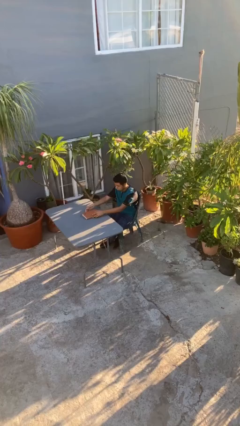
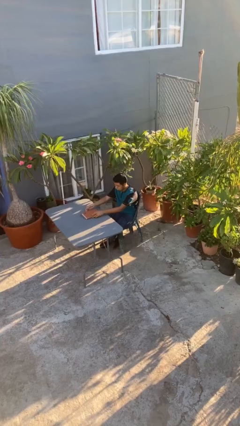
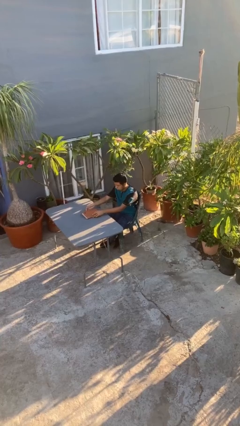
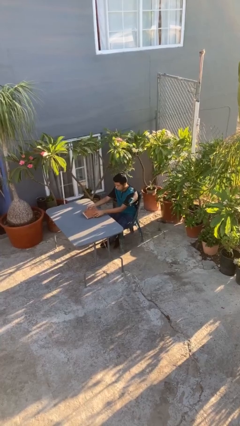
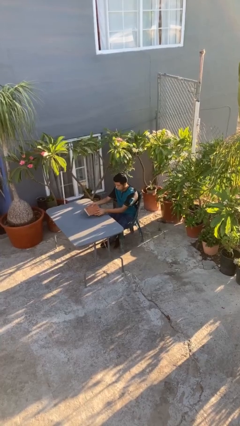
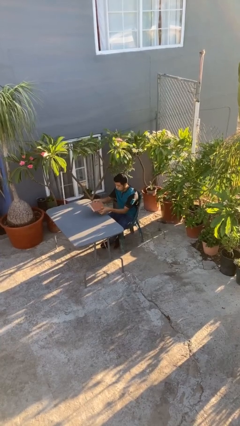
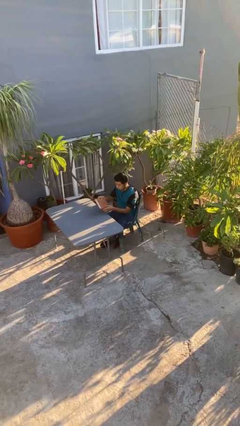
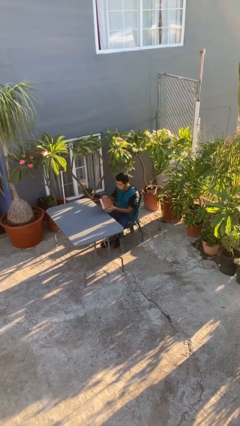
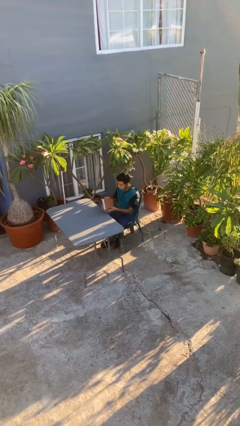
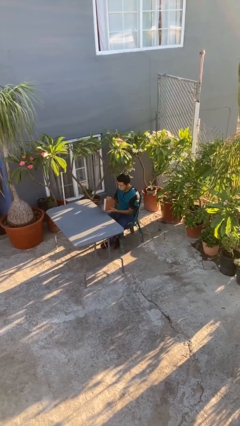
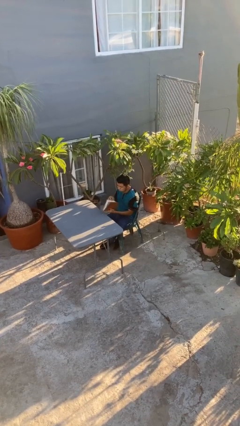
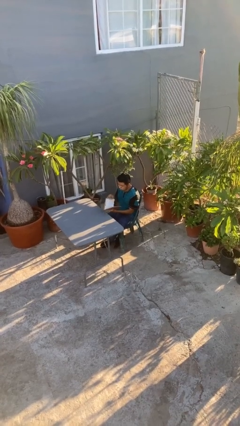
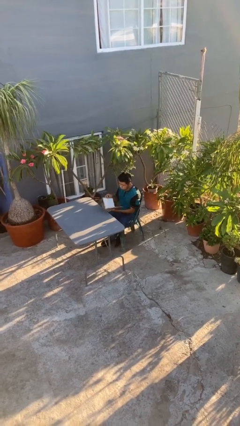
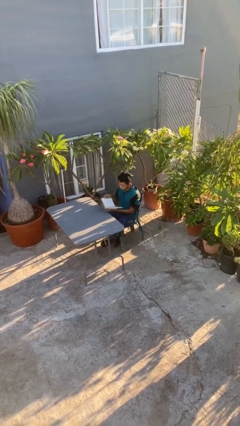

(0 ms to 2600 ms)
person picks up object from table

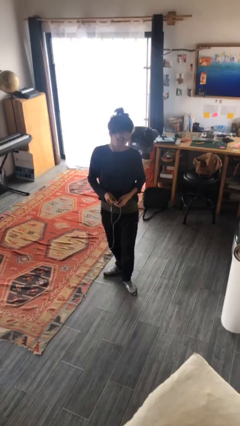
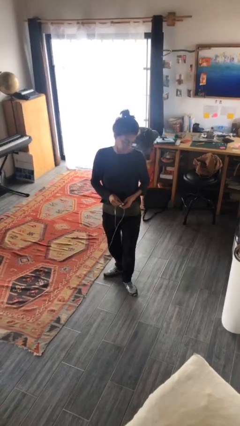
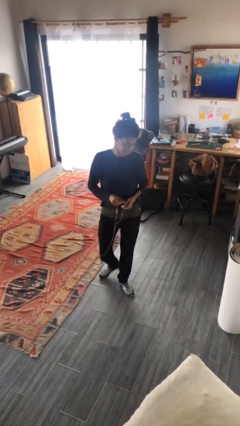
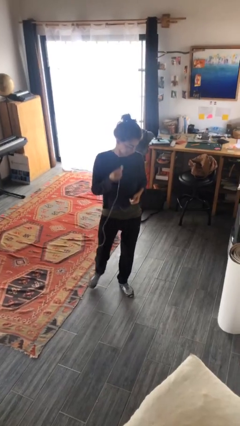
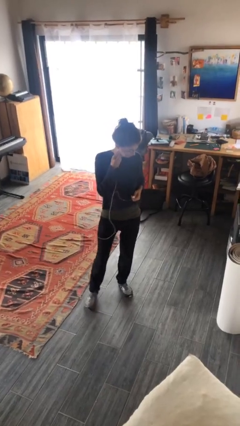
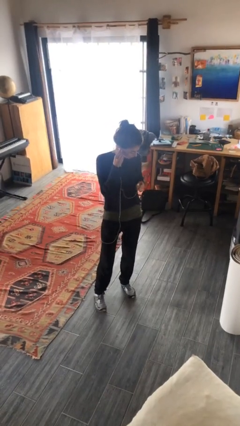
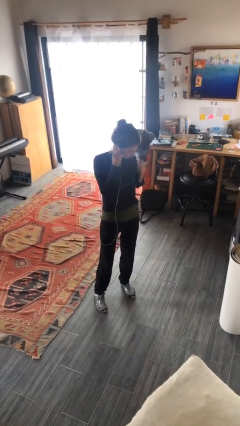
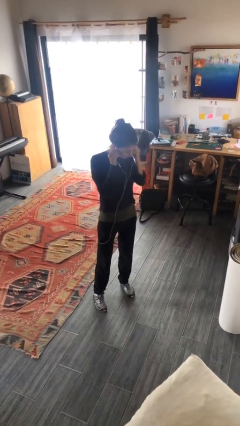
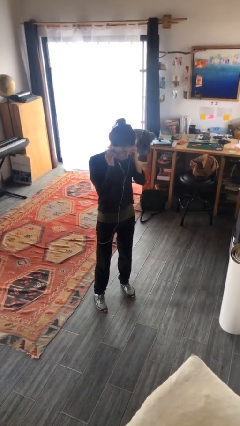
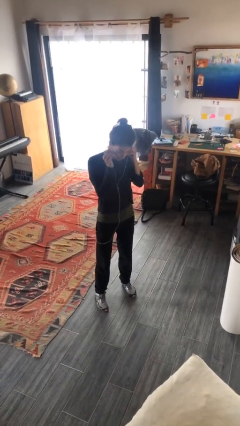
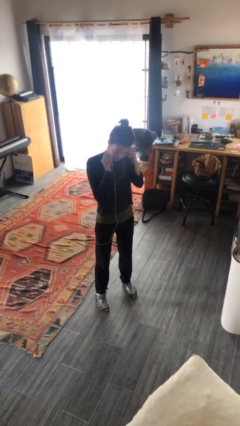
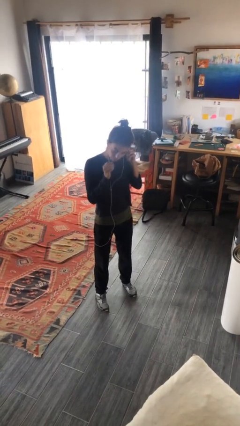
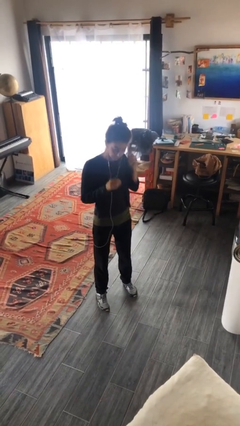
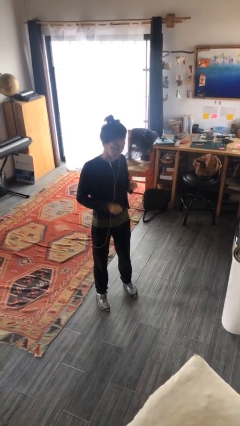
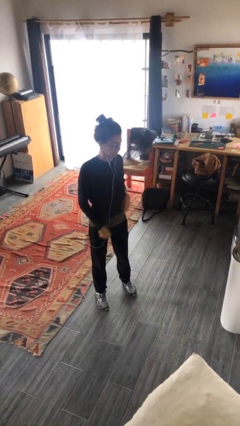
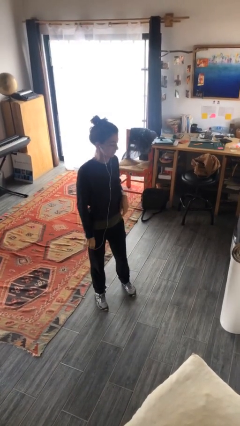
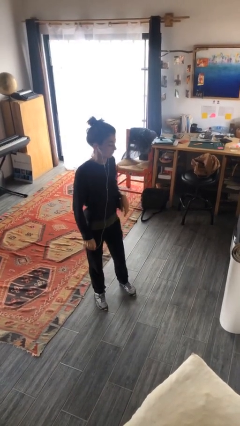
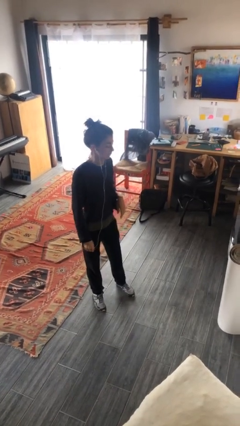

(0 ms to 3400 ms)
person puts on headphones

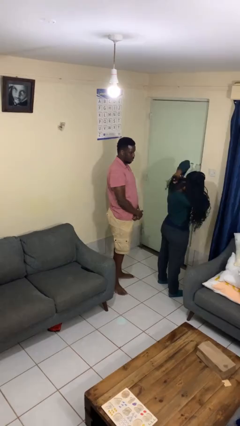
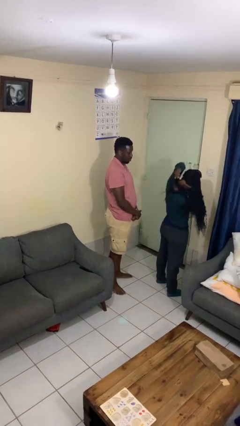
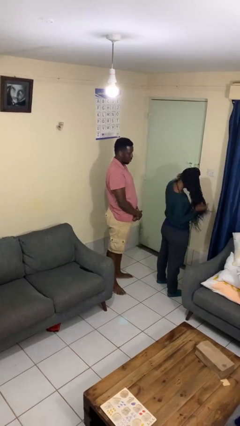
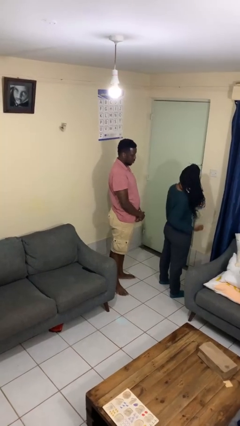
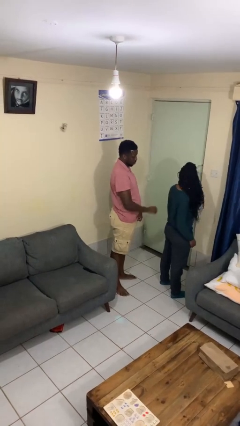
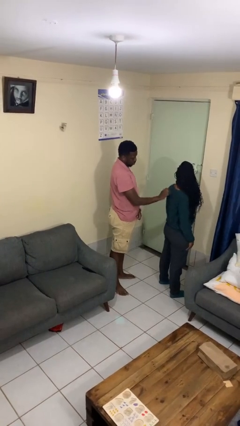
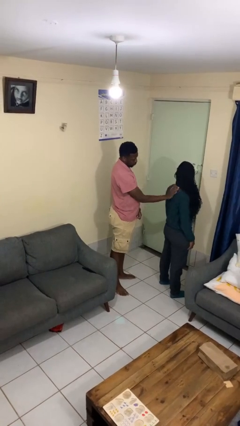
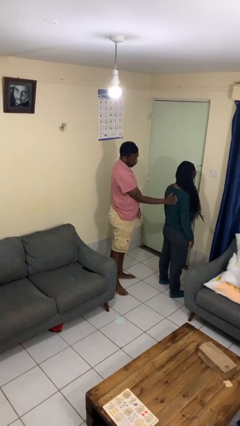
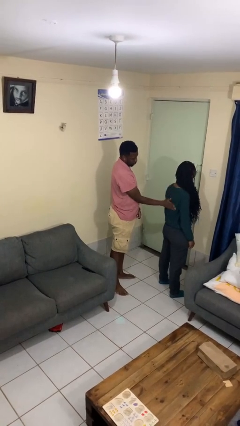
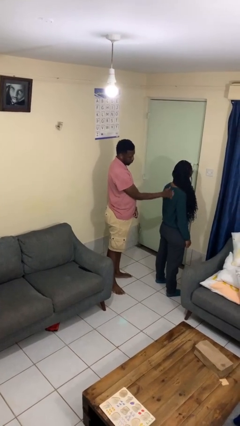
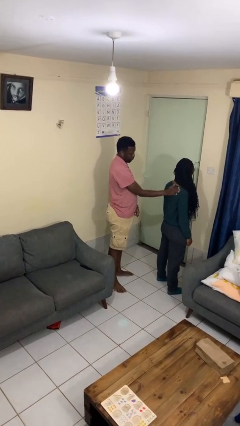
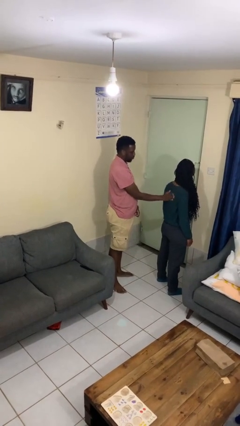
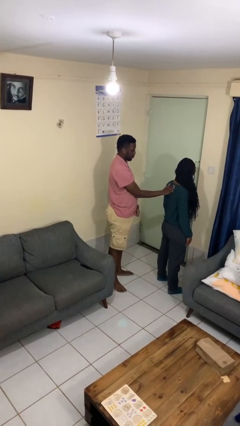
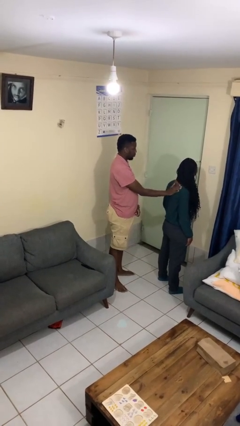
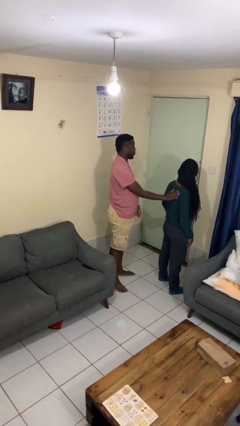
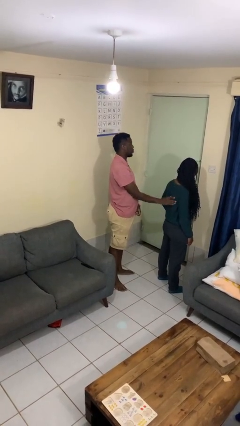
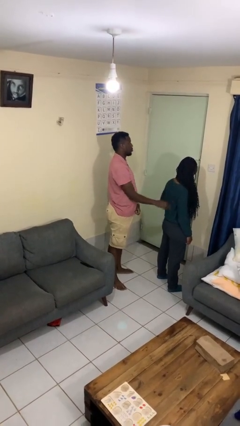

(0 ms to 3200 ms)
person touches back of person

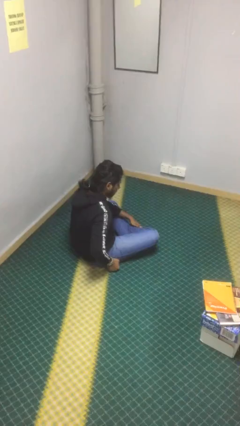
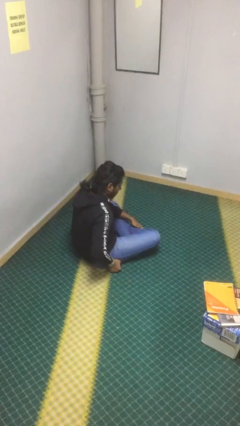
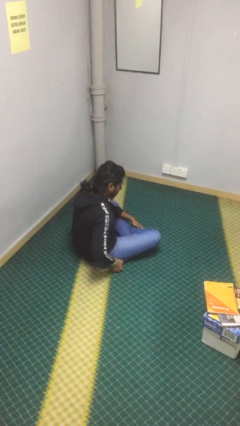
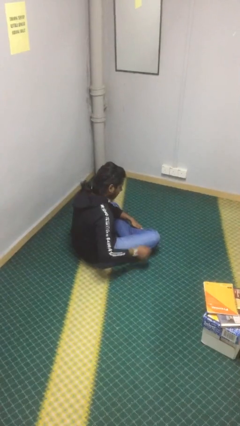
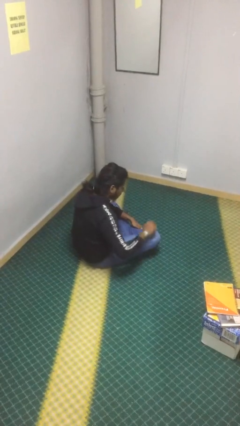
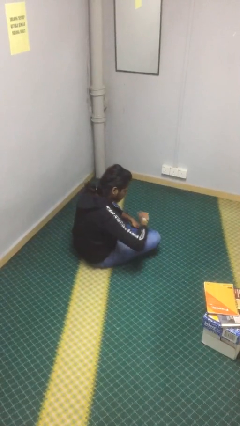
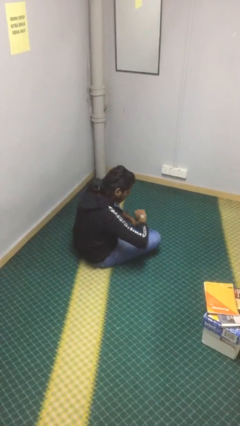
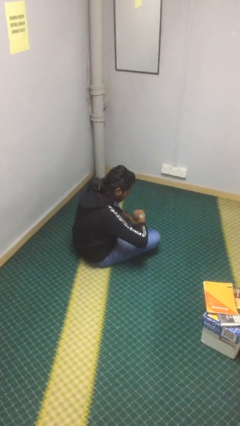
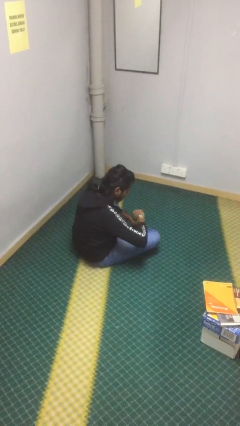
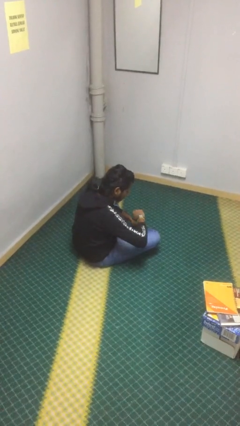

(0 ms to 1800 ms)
person looks at wristwatch

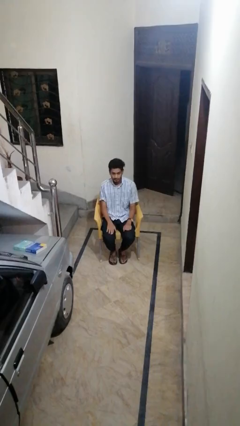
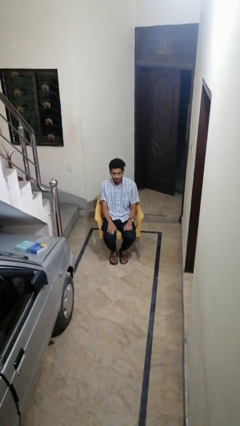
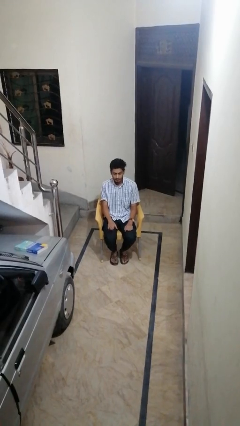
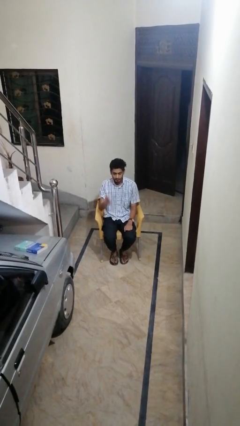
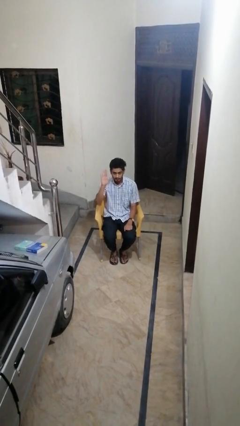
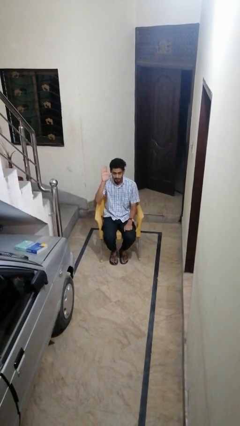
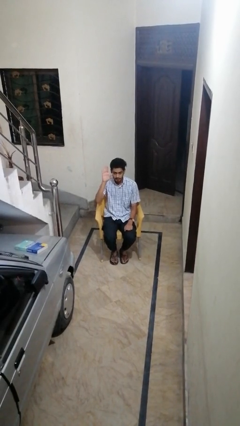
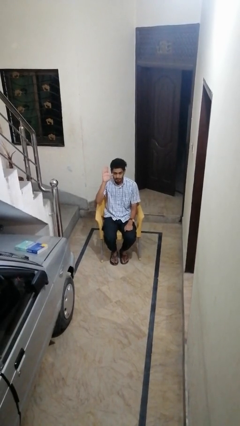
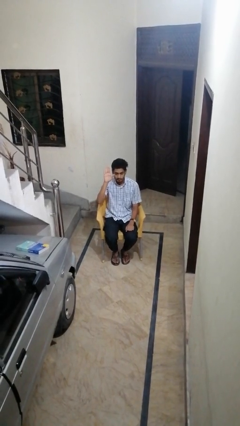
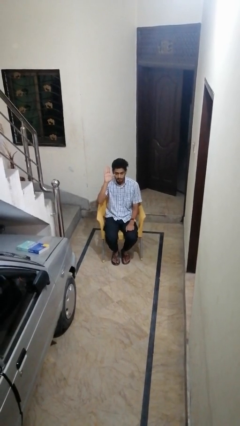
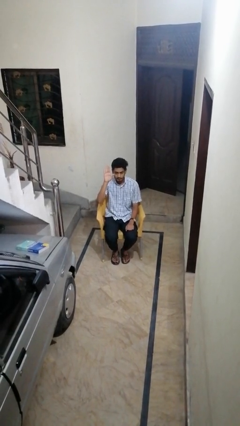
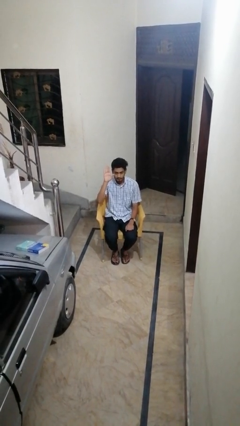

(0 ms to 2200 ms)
person gestures raise hand

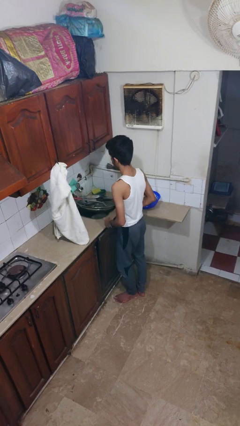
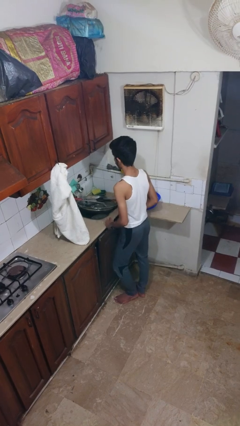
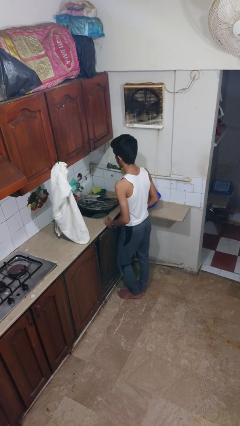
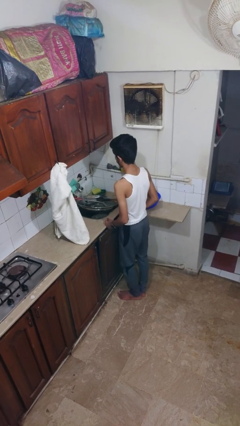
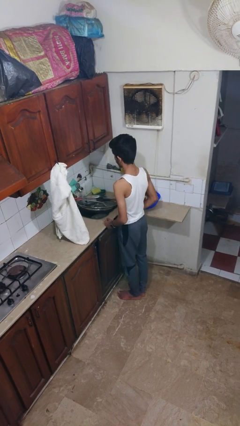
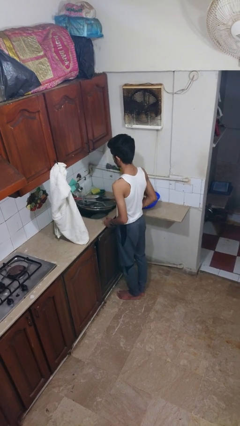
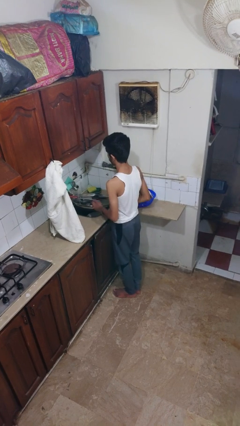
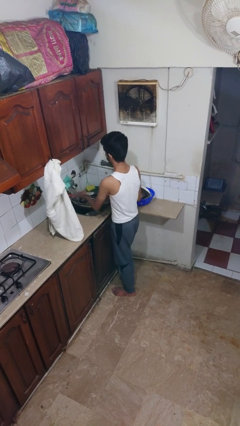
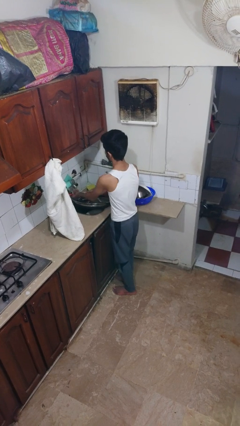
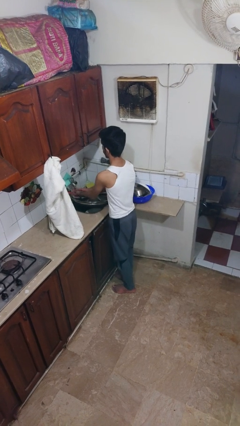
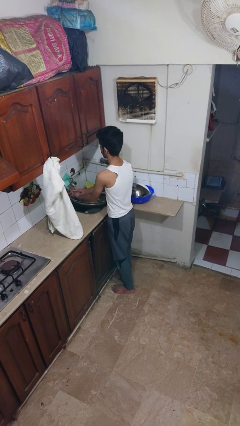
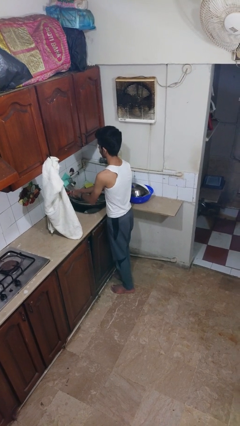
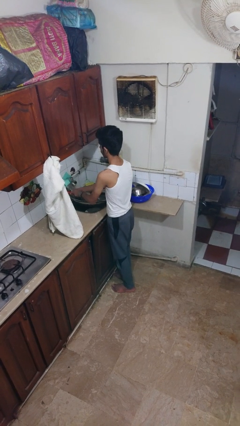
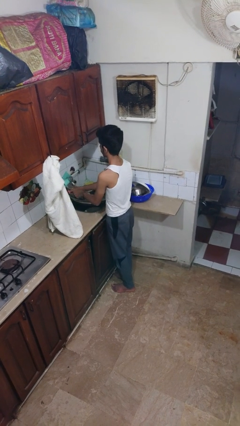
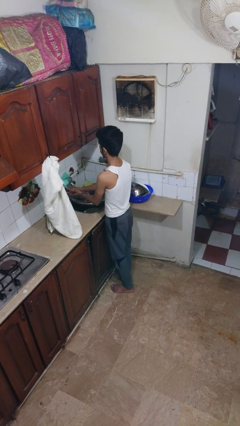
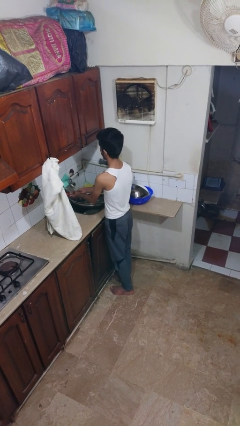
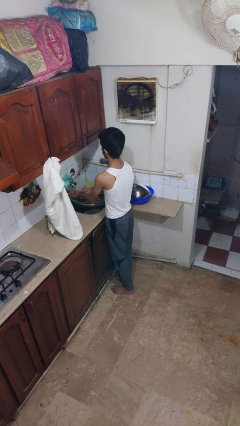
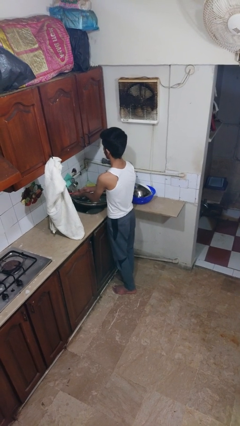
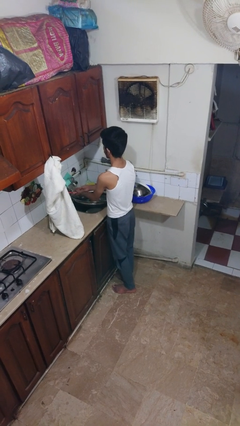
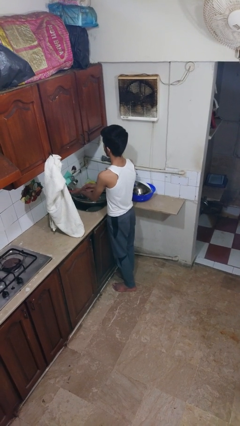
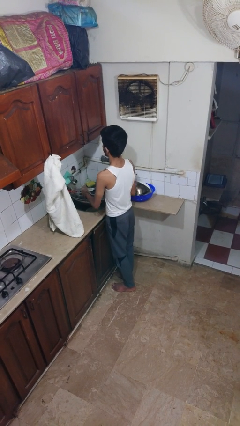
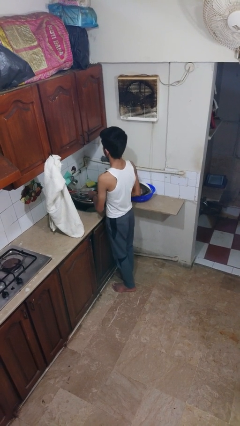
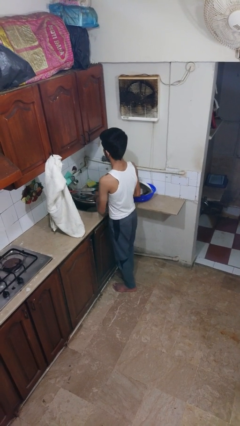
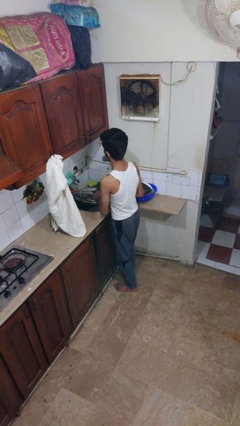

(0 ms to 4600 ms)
person washes hands
